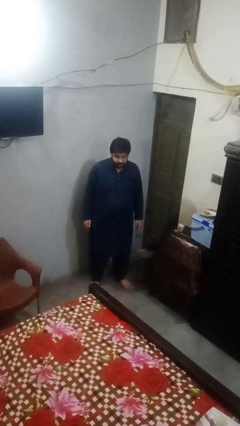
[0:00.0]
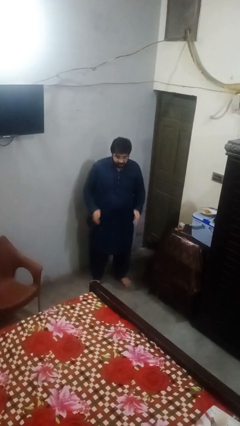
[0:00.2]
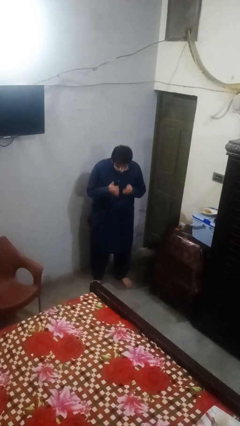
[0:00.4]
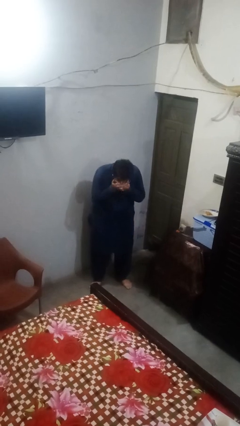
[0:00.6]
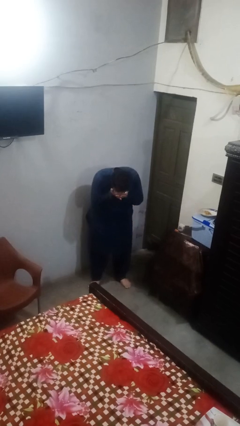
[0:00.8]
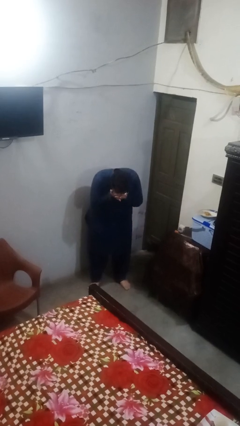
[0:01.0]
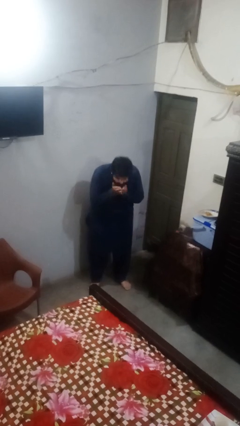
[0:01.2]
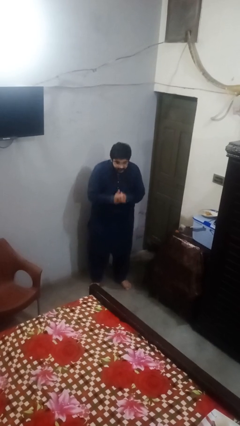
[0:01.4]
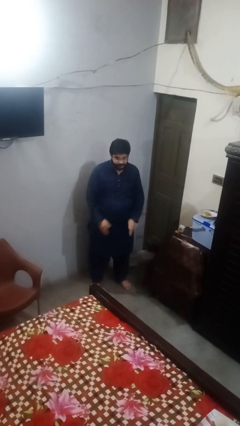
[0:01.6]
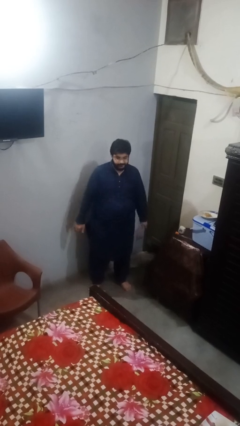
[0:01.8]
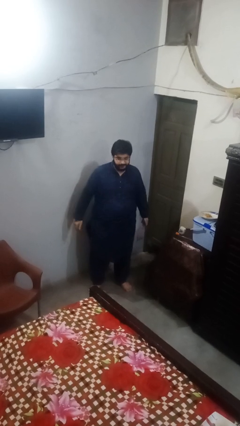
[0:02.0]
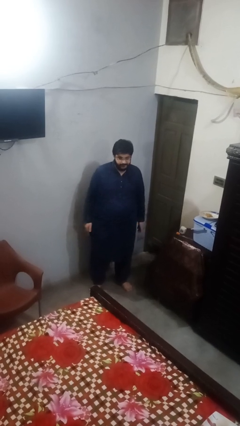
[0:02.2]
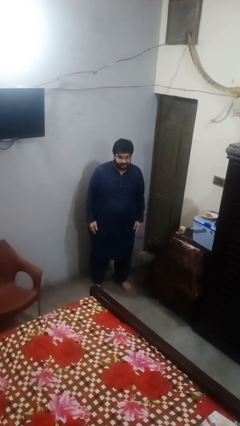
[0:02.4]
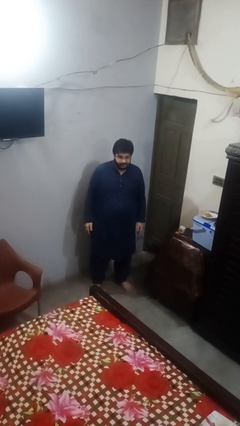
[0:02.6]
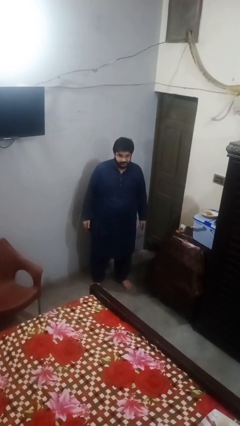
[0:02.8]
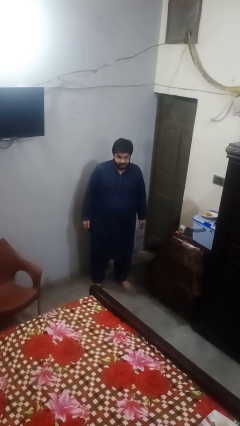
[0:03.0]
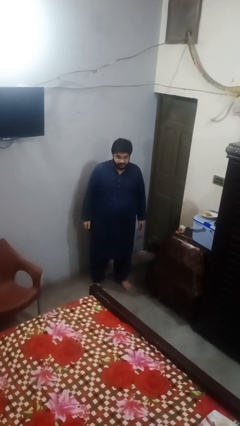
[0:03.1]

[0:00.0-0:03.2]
person sneezes into hand

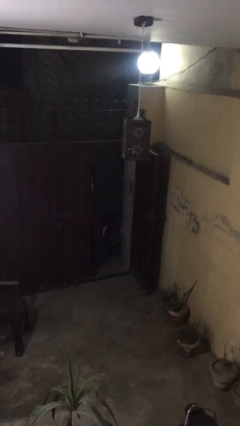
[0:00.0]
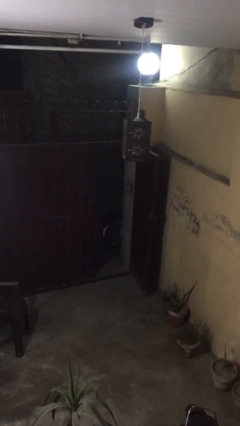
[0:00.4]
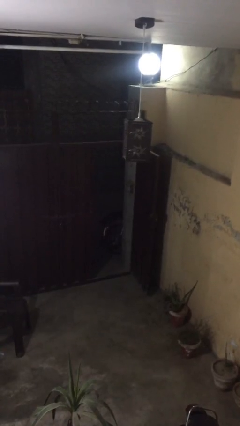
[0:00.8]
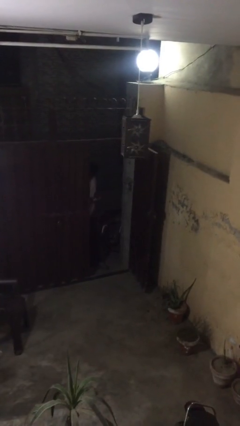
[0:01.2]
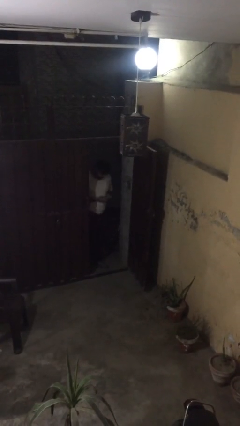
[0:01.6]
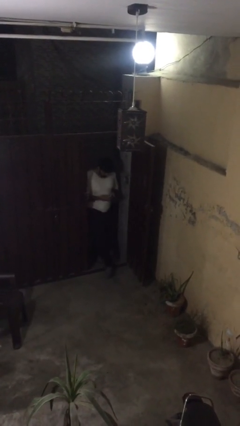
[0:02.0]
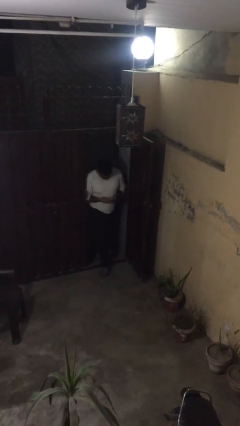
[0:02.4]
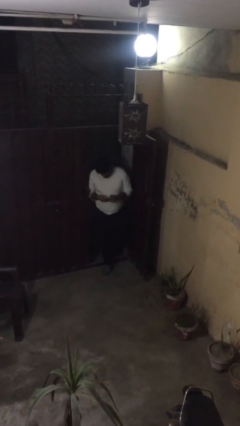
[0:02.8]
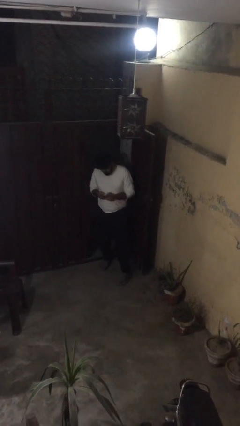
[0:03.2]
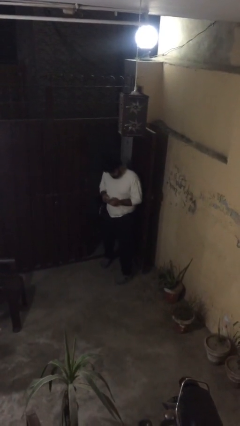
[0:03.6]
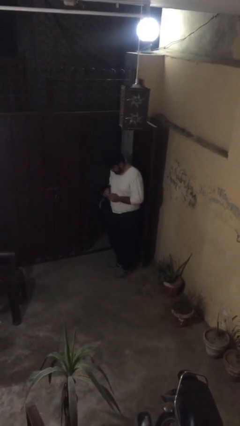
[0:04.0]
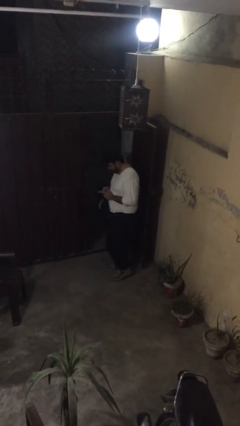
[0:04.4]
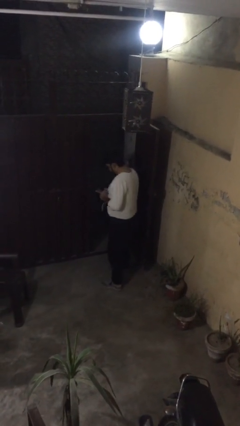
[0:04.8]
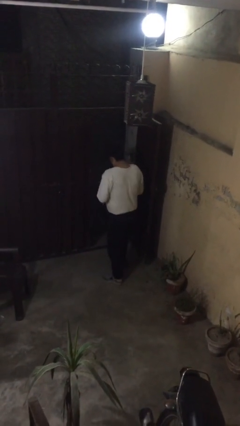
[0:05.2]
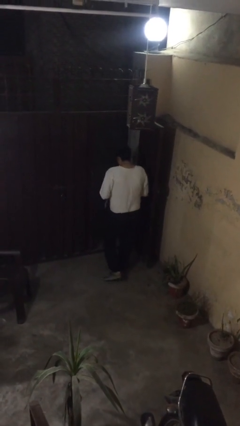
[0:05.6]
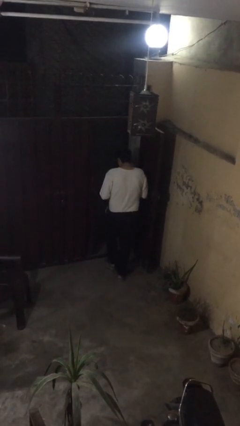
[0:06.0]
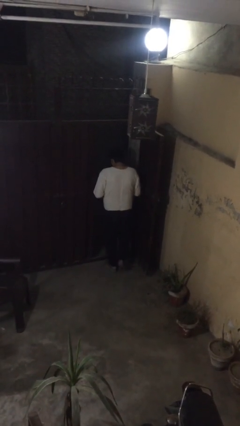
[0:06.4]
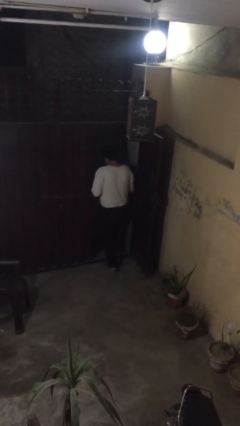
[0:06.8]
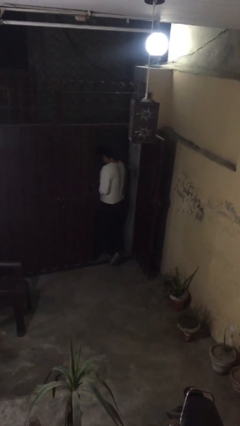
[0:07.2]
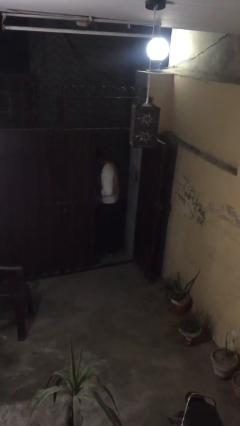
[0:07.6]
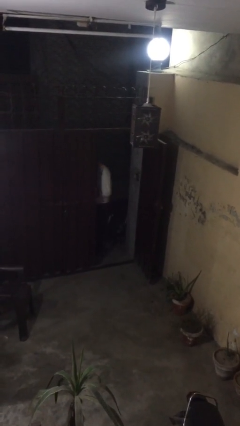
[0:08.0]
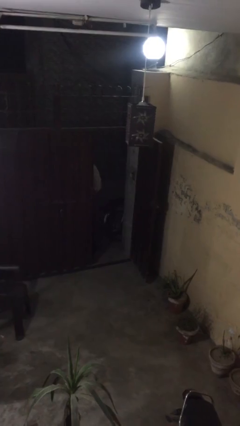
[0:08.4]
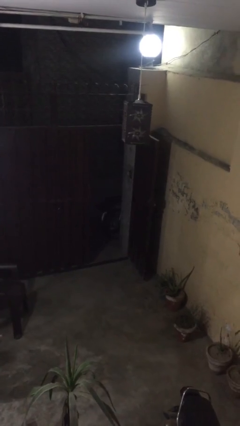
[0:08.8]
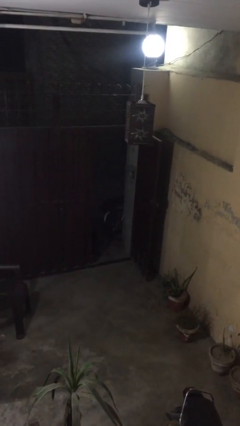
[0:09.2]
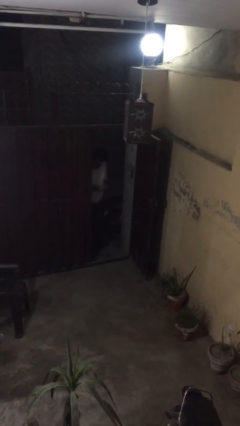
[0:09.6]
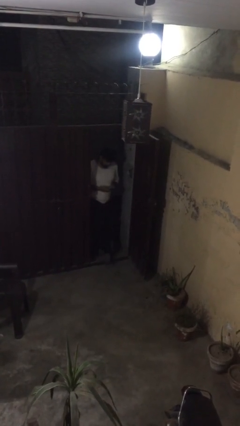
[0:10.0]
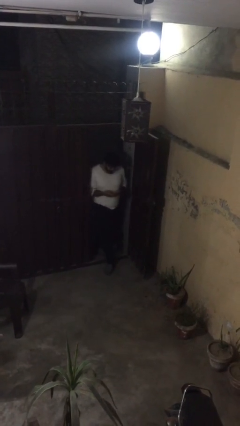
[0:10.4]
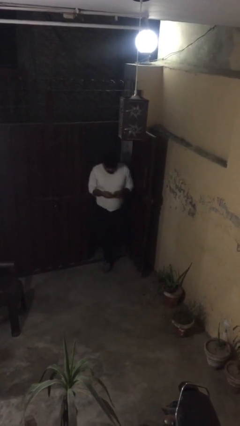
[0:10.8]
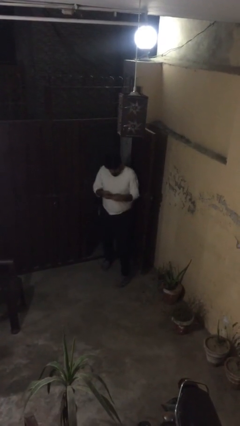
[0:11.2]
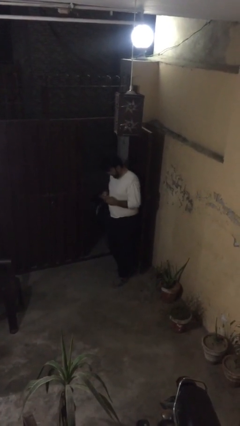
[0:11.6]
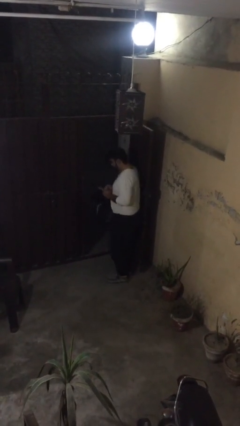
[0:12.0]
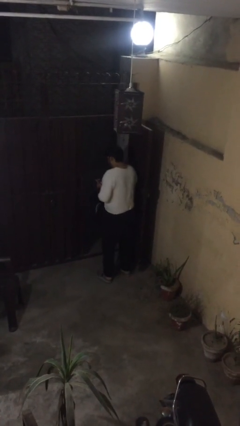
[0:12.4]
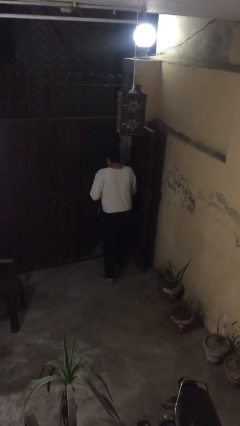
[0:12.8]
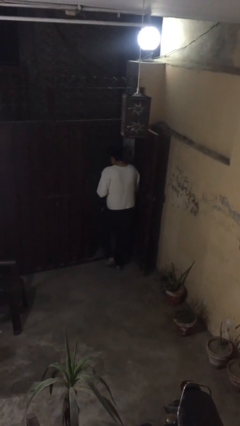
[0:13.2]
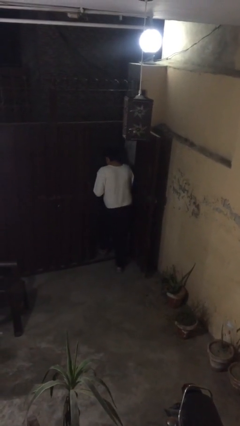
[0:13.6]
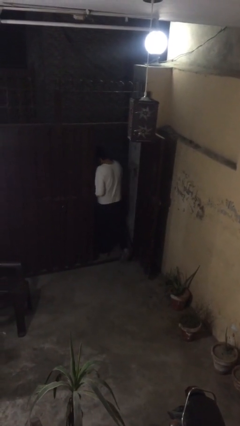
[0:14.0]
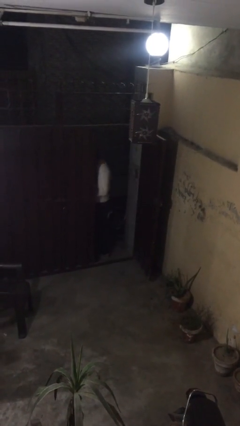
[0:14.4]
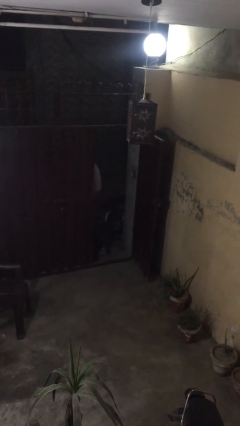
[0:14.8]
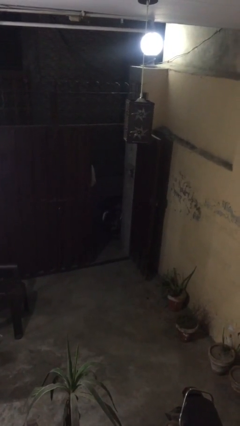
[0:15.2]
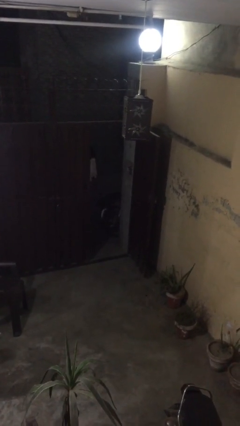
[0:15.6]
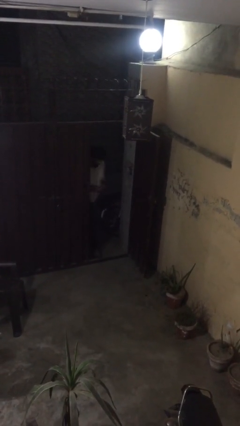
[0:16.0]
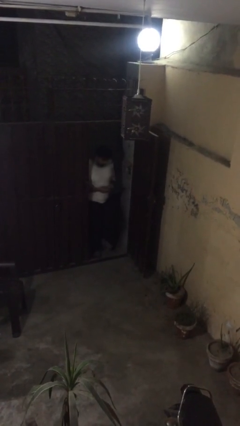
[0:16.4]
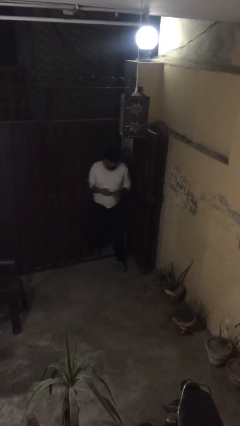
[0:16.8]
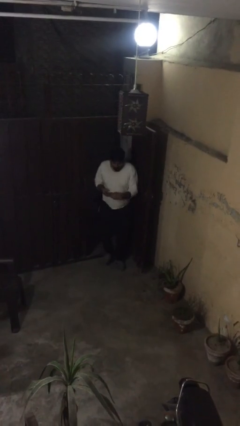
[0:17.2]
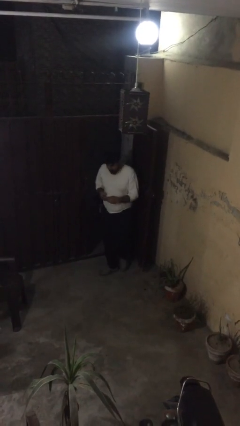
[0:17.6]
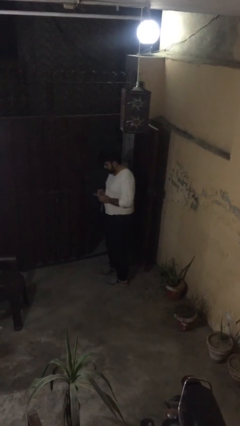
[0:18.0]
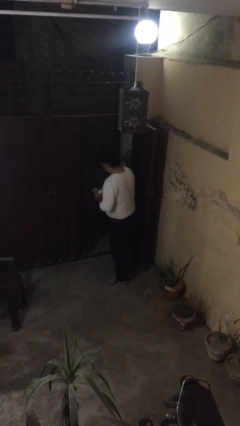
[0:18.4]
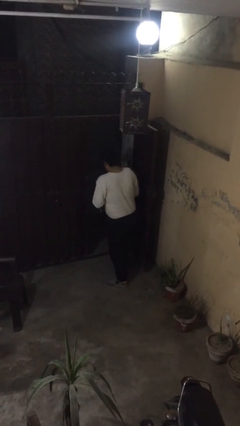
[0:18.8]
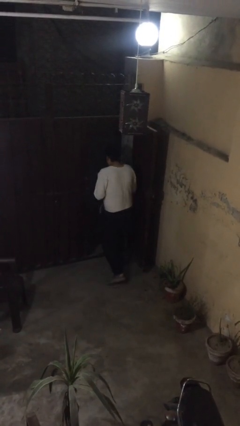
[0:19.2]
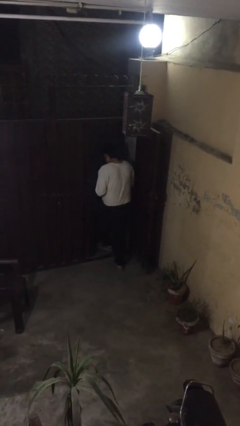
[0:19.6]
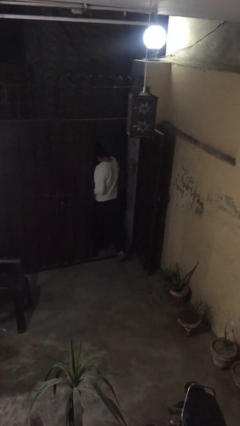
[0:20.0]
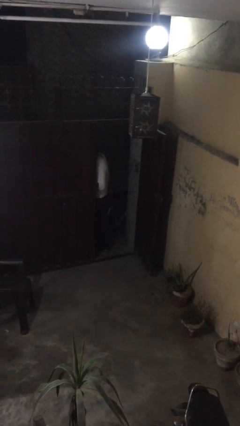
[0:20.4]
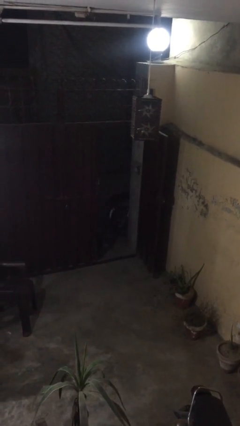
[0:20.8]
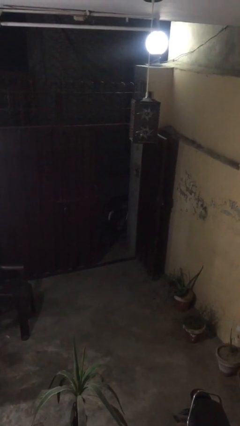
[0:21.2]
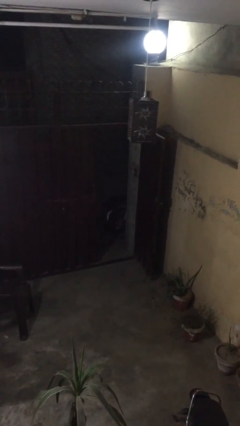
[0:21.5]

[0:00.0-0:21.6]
person texts on phone

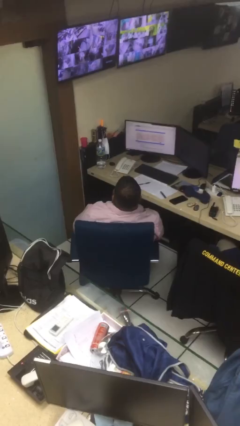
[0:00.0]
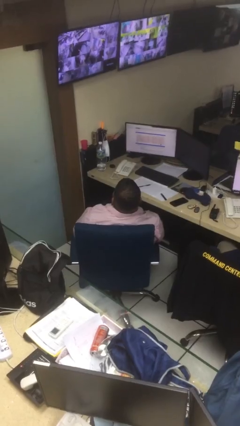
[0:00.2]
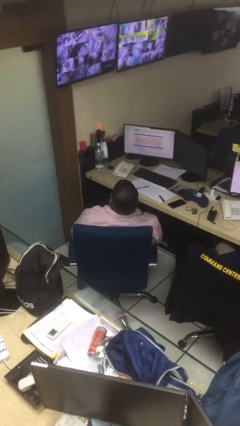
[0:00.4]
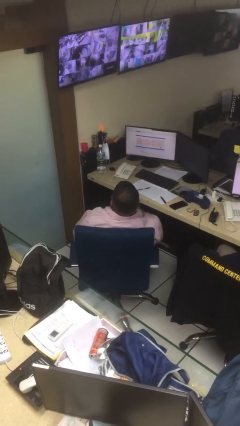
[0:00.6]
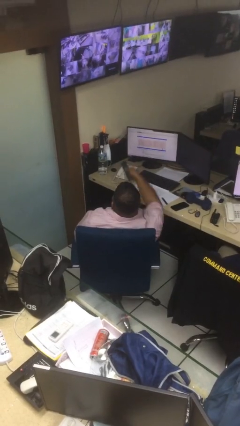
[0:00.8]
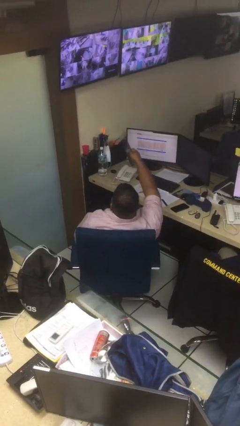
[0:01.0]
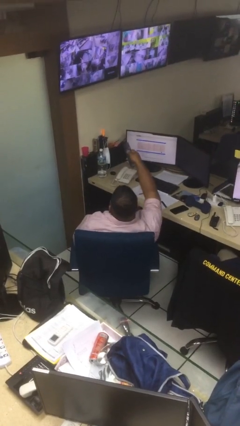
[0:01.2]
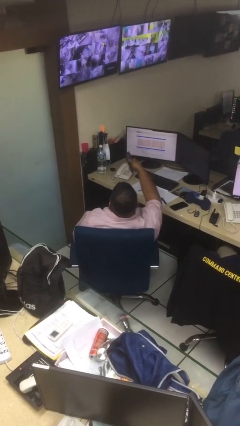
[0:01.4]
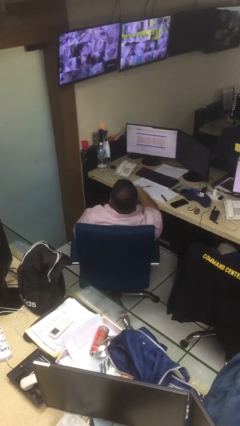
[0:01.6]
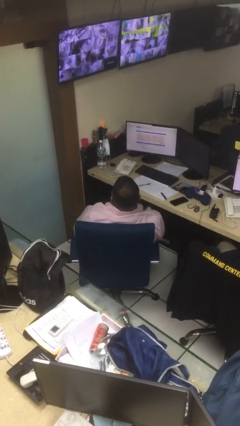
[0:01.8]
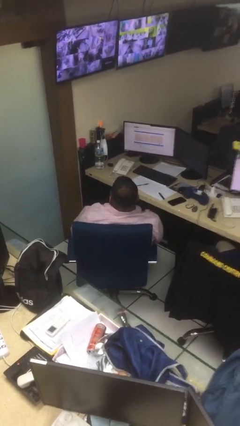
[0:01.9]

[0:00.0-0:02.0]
person uses television remote

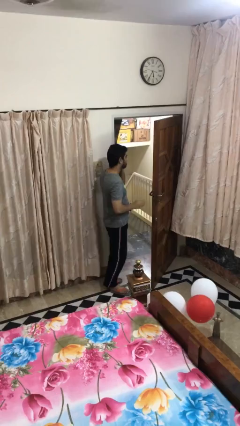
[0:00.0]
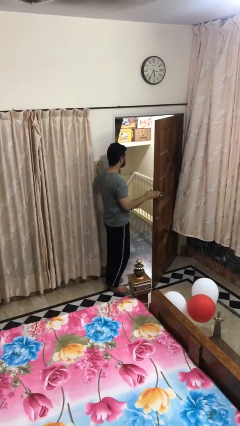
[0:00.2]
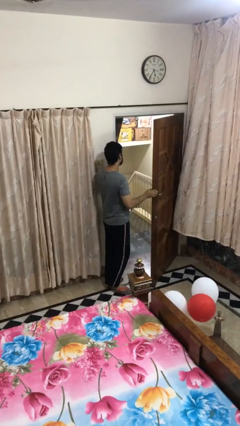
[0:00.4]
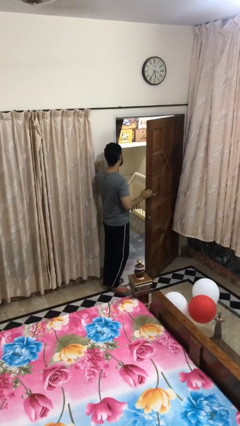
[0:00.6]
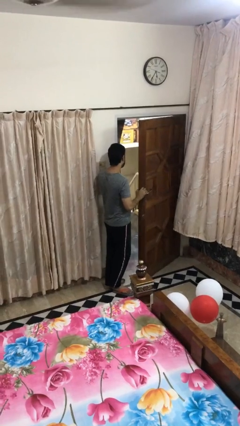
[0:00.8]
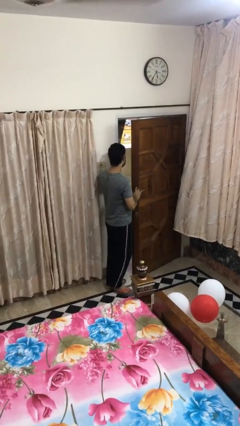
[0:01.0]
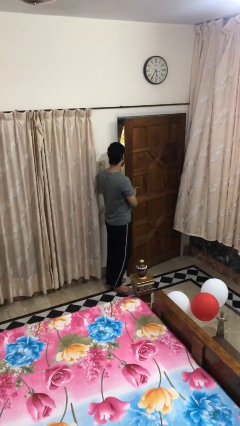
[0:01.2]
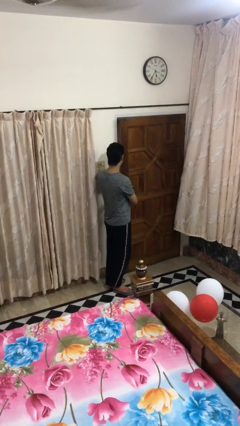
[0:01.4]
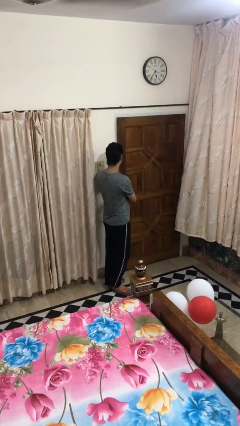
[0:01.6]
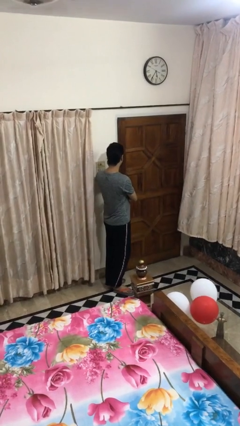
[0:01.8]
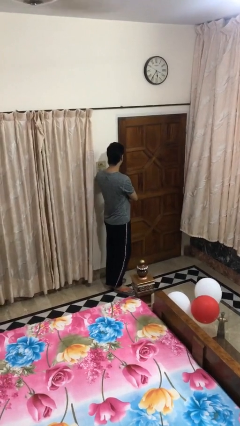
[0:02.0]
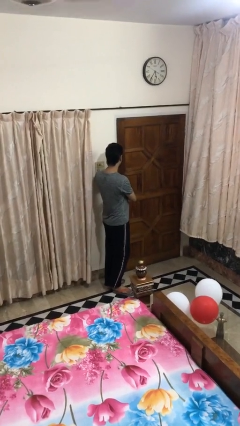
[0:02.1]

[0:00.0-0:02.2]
person closes facility door

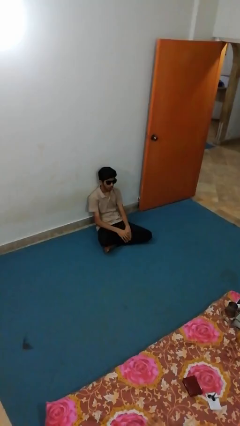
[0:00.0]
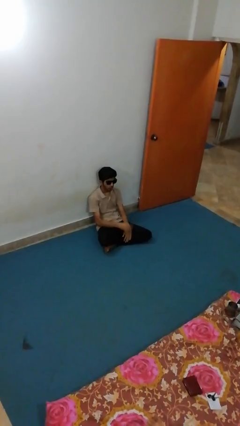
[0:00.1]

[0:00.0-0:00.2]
person takes off sunglasses
